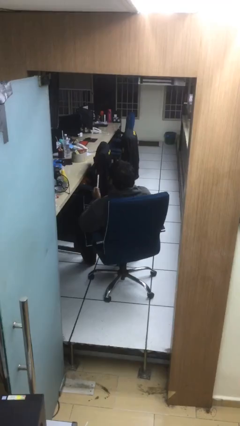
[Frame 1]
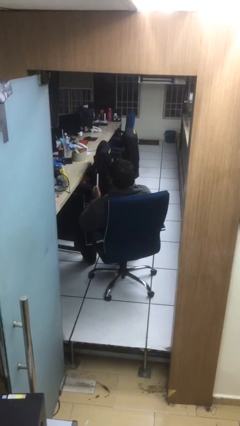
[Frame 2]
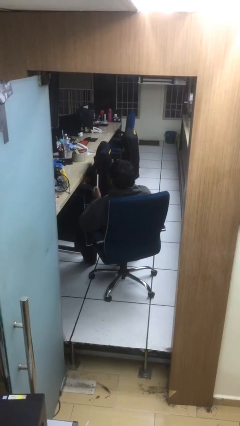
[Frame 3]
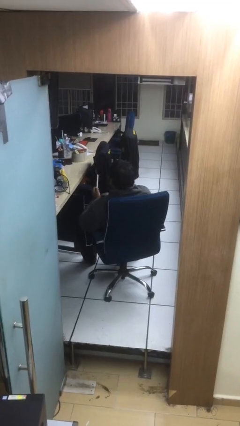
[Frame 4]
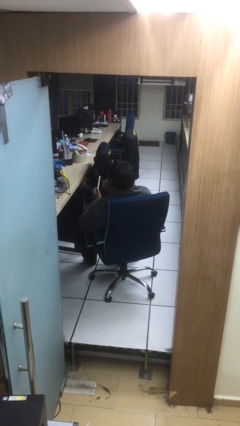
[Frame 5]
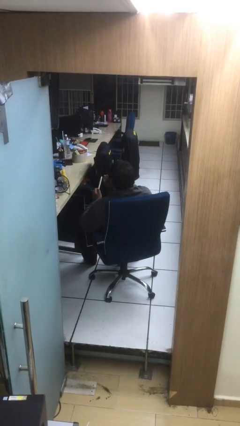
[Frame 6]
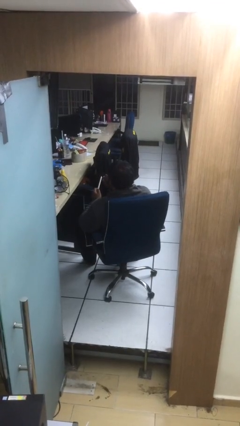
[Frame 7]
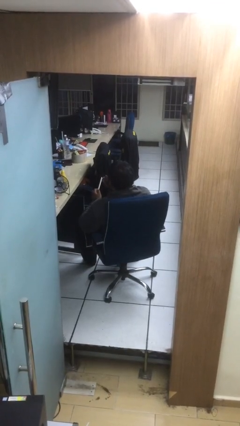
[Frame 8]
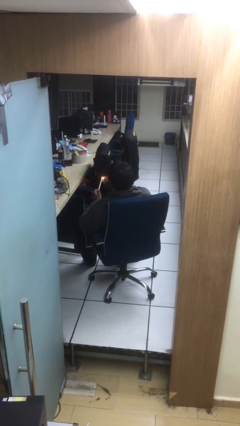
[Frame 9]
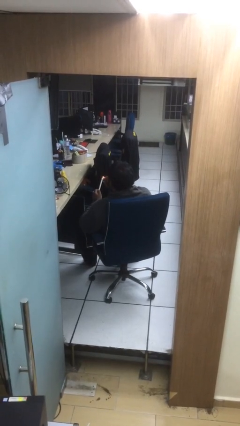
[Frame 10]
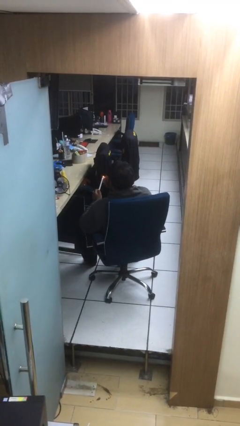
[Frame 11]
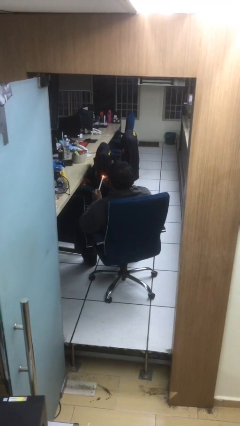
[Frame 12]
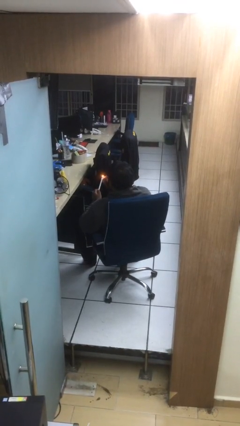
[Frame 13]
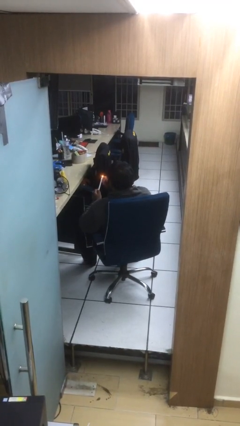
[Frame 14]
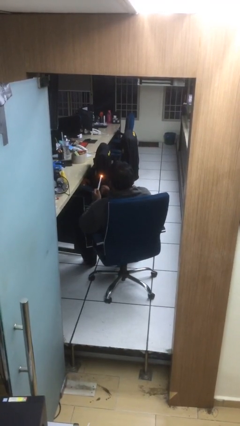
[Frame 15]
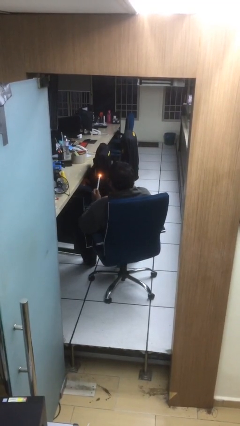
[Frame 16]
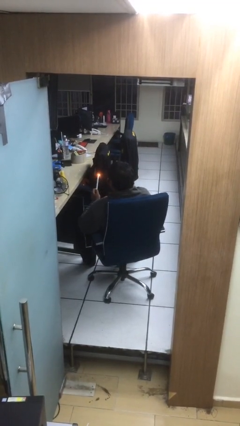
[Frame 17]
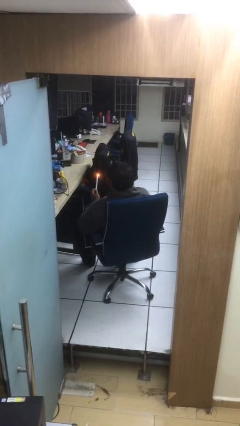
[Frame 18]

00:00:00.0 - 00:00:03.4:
person lights candle

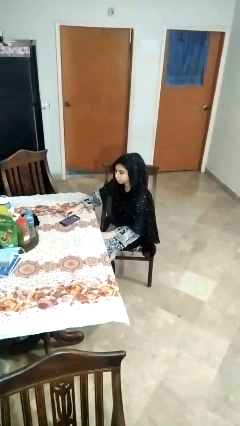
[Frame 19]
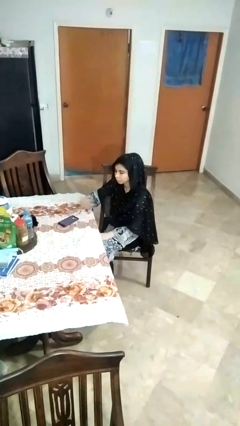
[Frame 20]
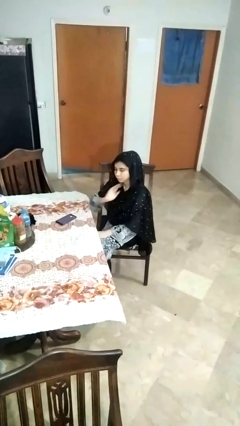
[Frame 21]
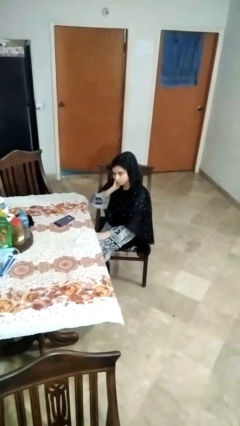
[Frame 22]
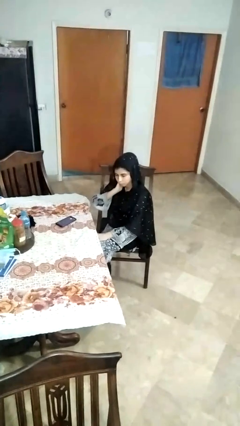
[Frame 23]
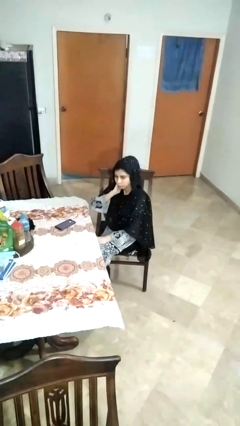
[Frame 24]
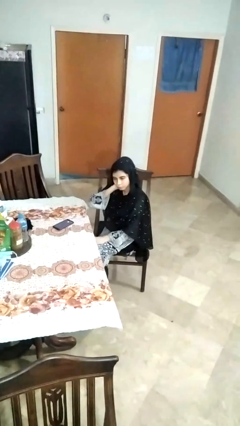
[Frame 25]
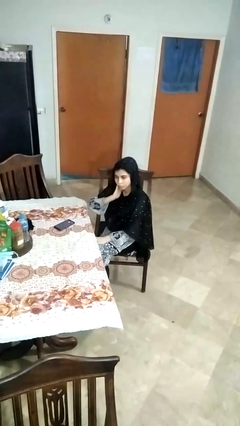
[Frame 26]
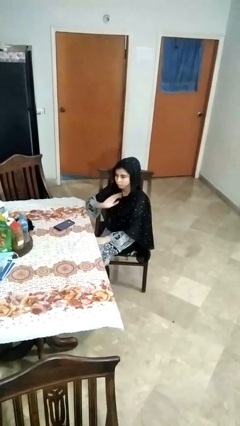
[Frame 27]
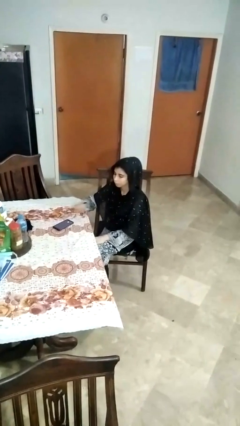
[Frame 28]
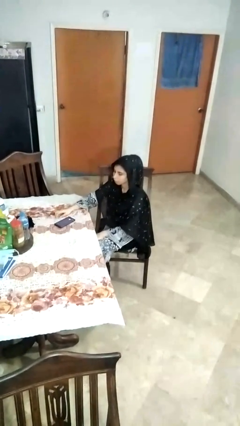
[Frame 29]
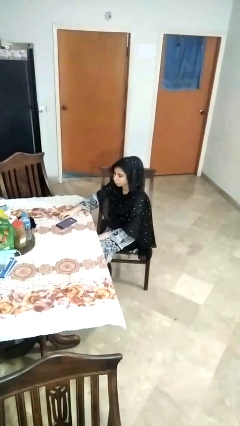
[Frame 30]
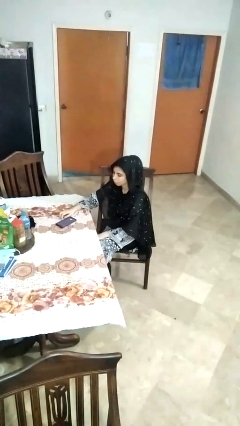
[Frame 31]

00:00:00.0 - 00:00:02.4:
person rubs neck

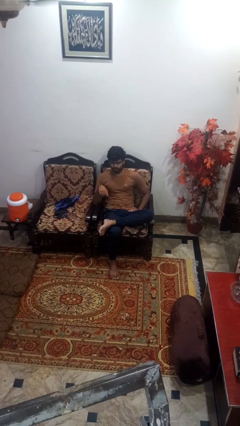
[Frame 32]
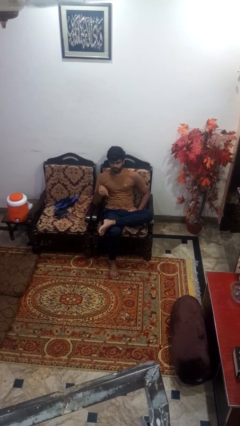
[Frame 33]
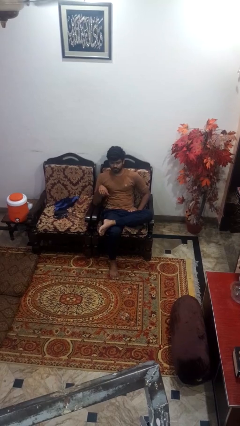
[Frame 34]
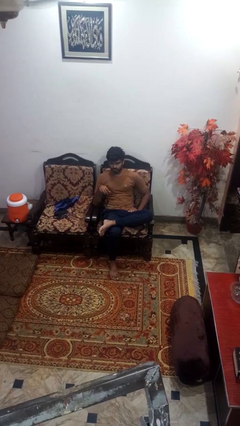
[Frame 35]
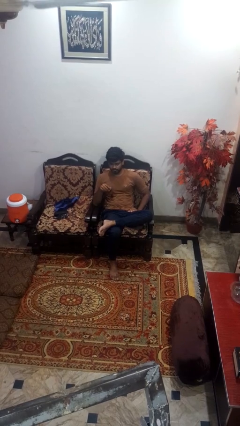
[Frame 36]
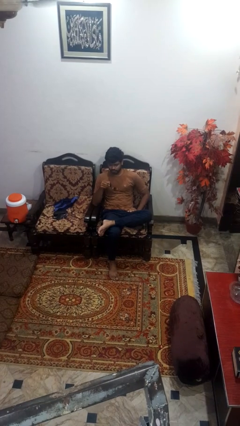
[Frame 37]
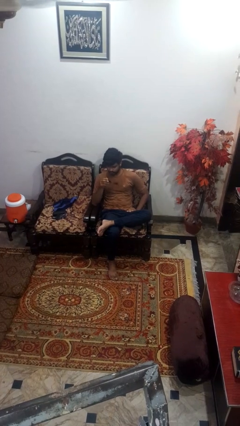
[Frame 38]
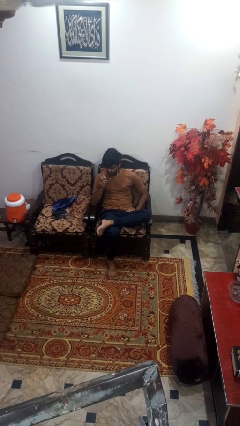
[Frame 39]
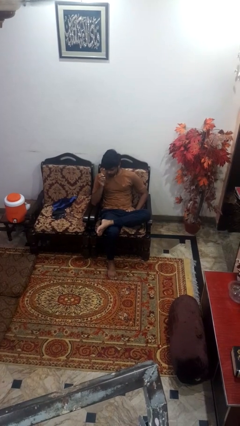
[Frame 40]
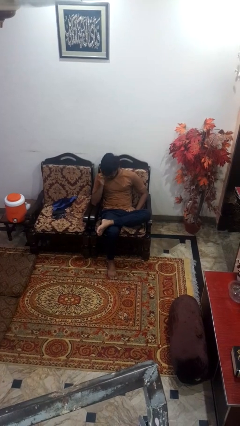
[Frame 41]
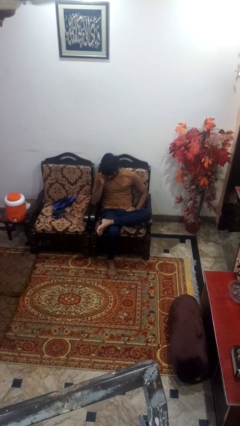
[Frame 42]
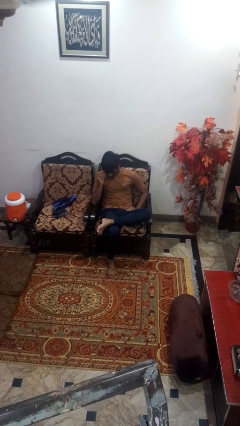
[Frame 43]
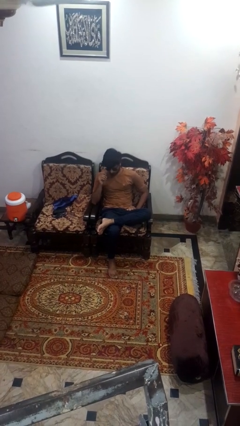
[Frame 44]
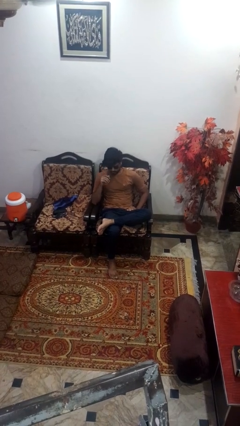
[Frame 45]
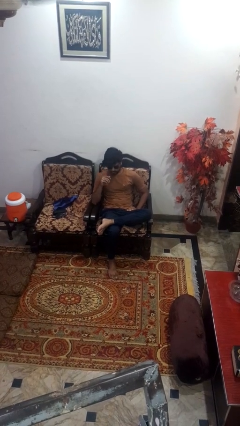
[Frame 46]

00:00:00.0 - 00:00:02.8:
person puts on sunglasses

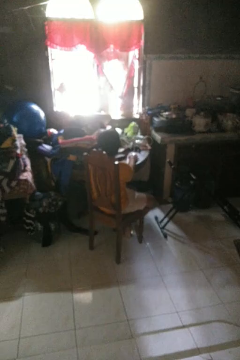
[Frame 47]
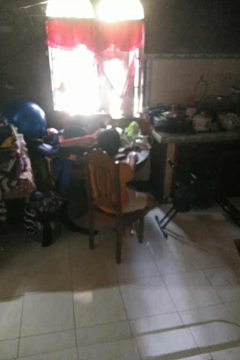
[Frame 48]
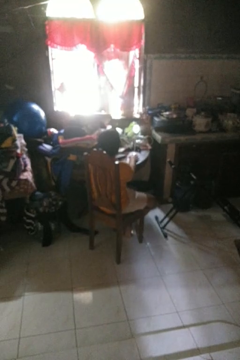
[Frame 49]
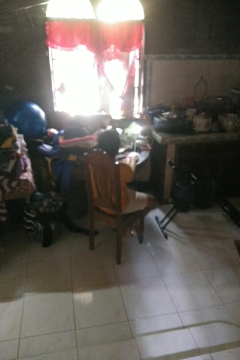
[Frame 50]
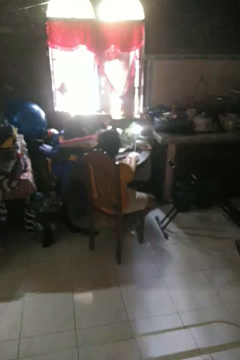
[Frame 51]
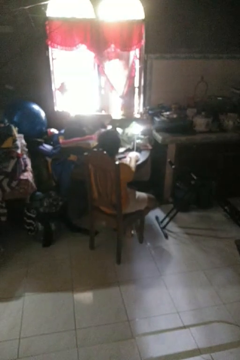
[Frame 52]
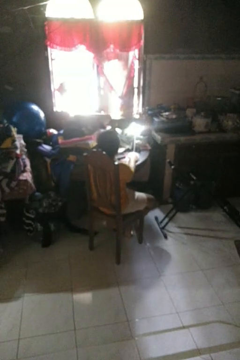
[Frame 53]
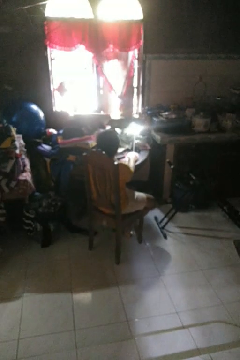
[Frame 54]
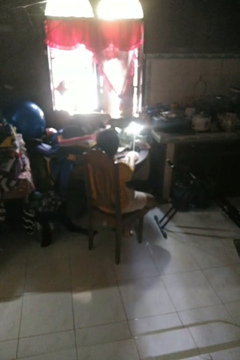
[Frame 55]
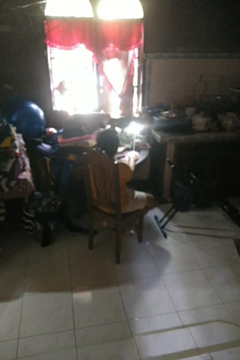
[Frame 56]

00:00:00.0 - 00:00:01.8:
person turns on lamp

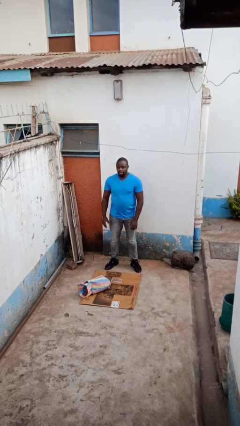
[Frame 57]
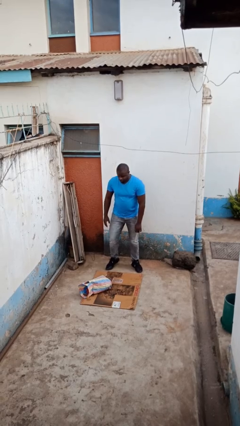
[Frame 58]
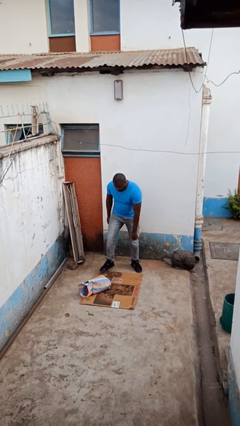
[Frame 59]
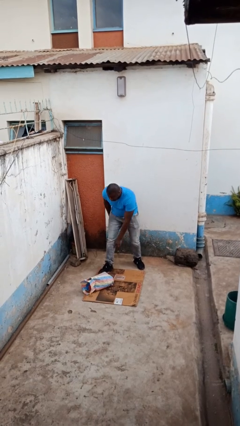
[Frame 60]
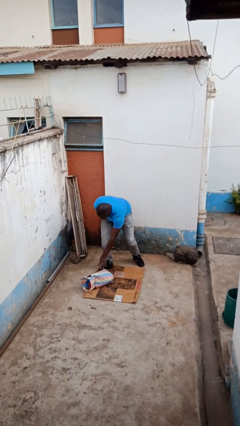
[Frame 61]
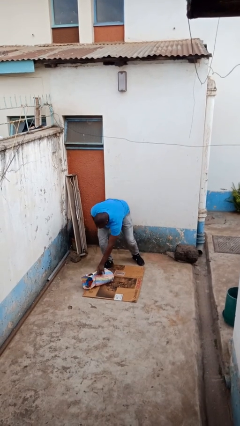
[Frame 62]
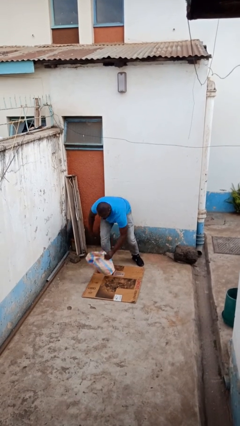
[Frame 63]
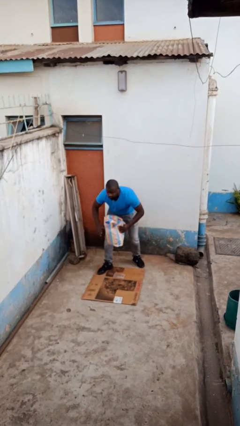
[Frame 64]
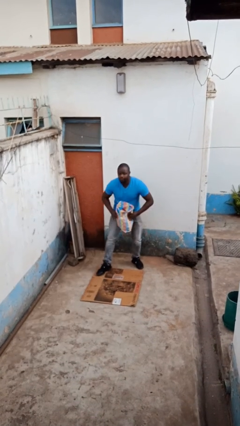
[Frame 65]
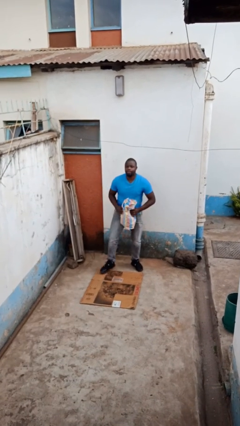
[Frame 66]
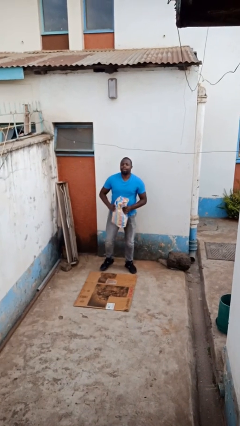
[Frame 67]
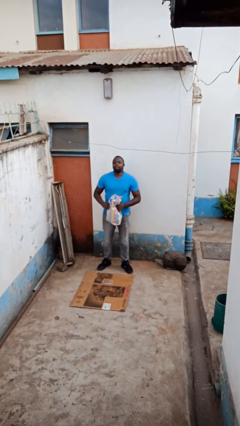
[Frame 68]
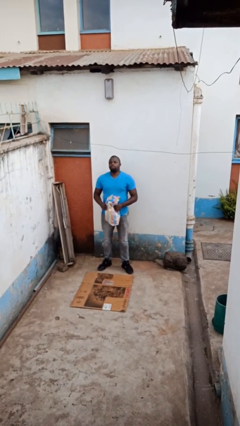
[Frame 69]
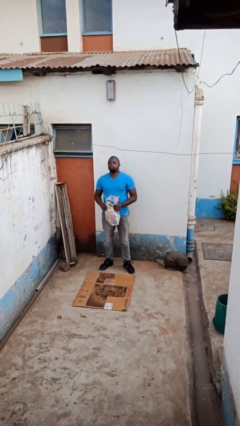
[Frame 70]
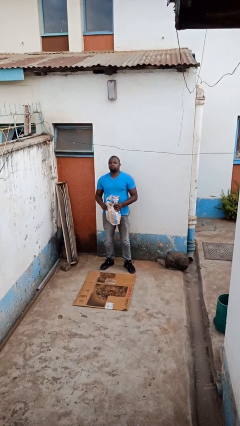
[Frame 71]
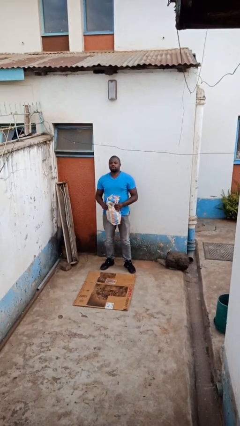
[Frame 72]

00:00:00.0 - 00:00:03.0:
person picks up object from floor

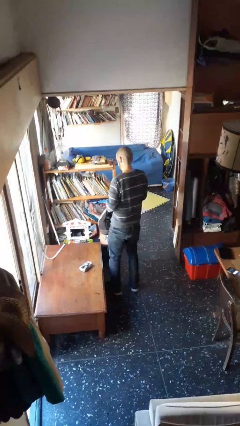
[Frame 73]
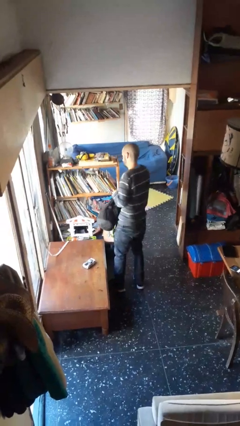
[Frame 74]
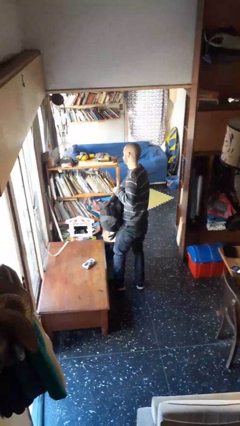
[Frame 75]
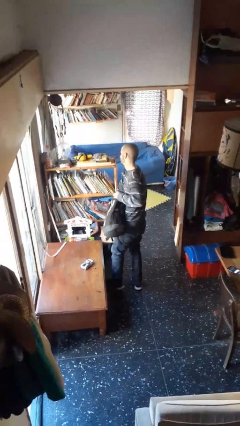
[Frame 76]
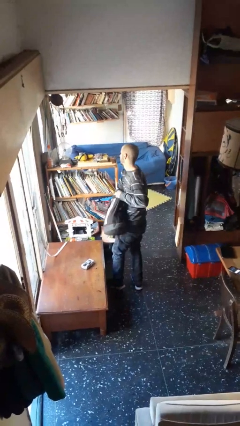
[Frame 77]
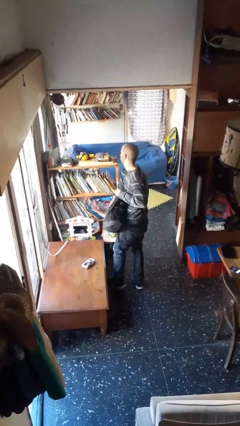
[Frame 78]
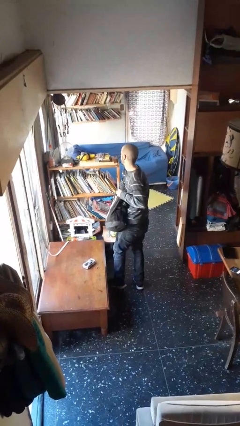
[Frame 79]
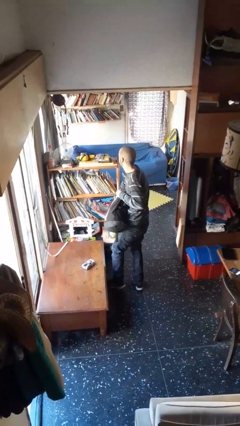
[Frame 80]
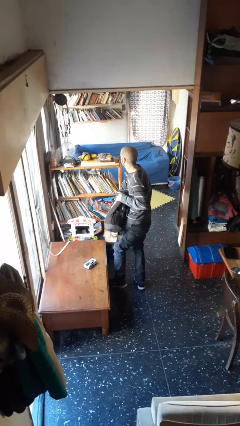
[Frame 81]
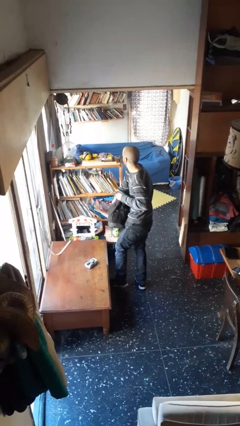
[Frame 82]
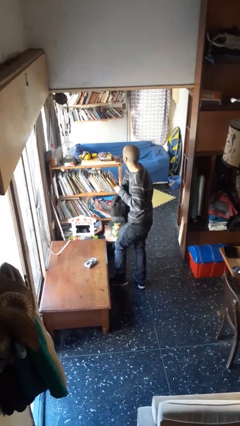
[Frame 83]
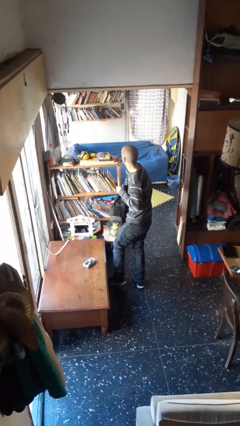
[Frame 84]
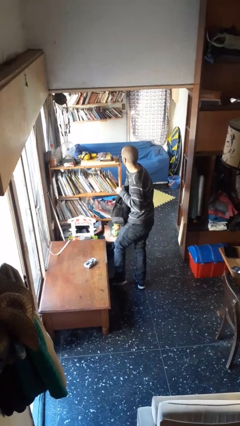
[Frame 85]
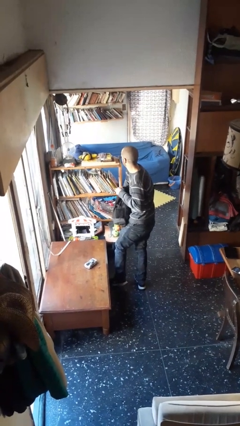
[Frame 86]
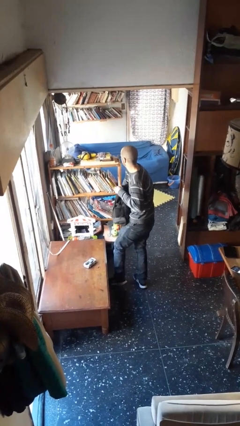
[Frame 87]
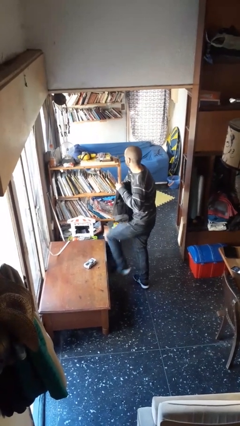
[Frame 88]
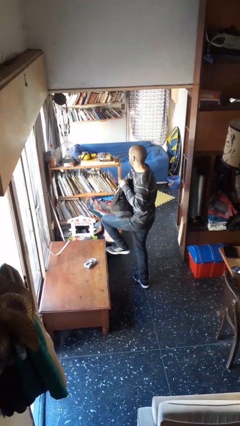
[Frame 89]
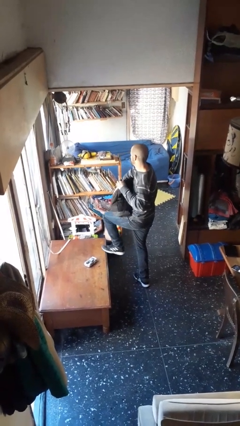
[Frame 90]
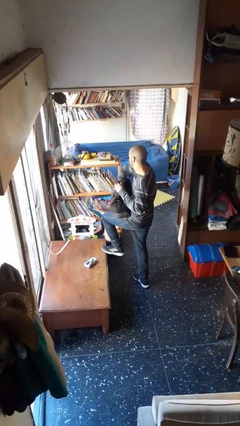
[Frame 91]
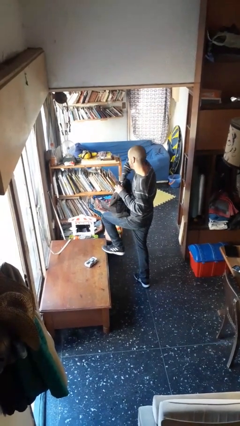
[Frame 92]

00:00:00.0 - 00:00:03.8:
person searches in backpack

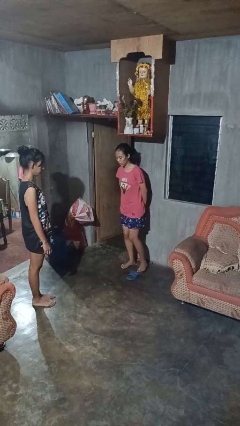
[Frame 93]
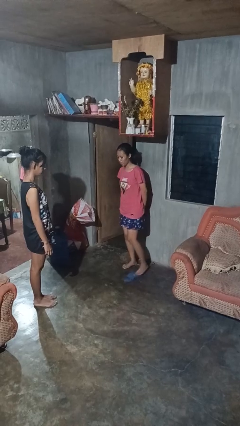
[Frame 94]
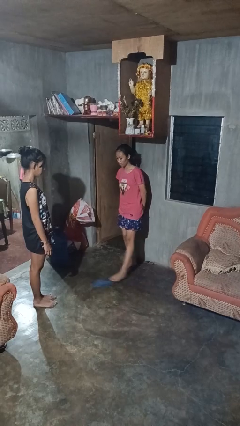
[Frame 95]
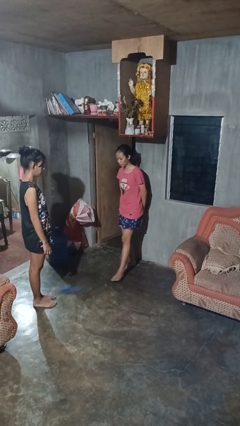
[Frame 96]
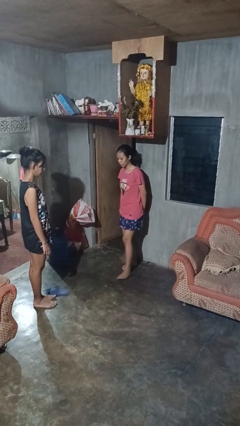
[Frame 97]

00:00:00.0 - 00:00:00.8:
person kicks object to person
